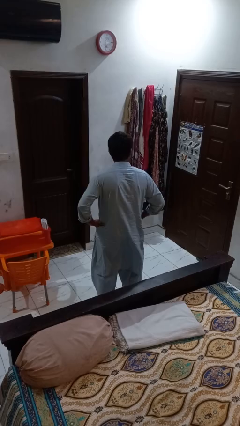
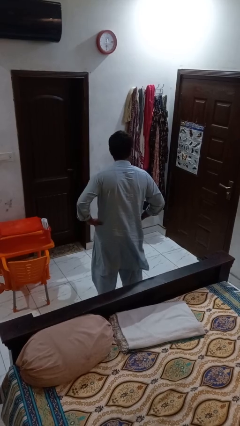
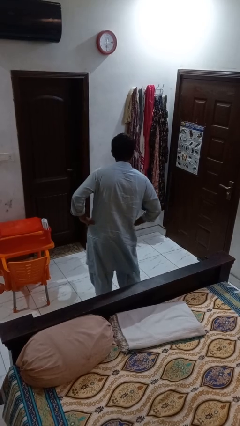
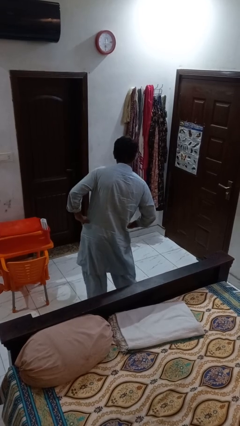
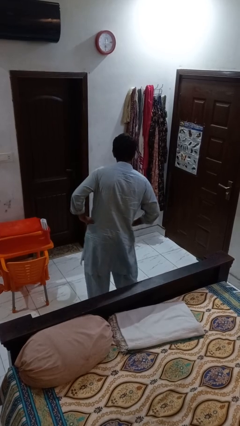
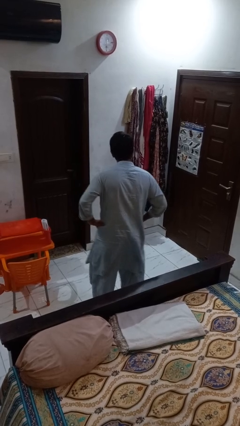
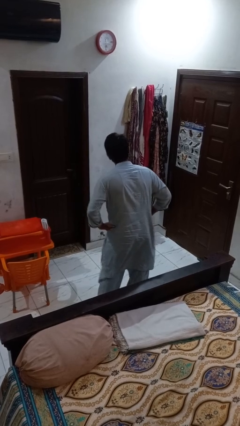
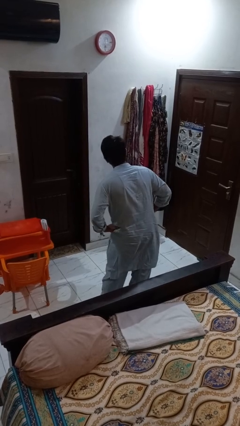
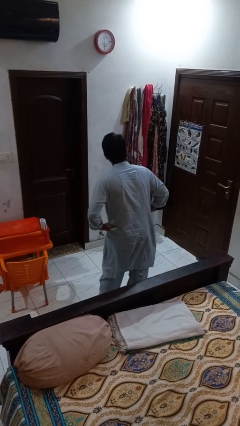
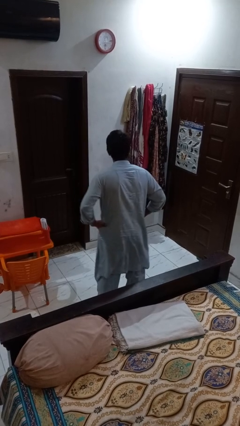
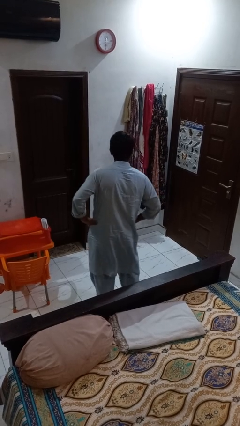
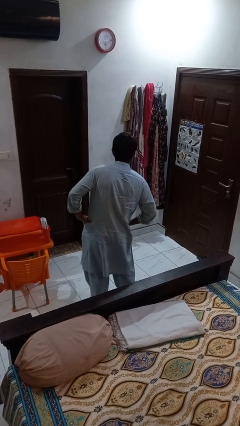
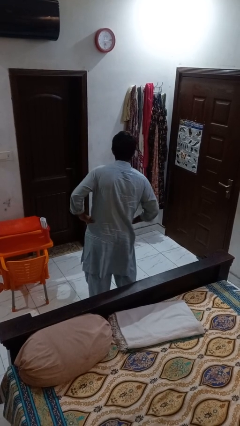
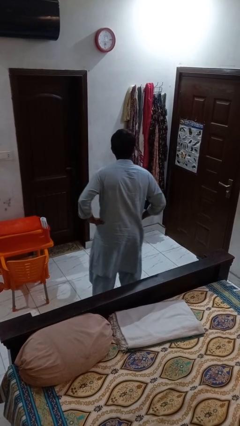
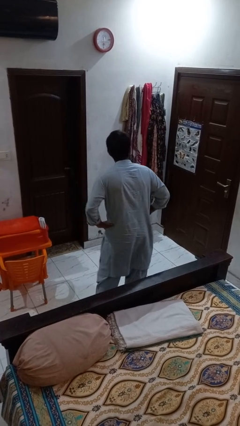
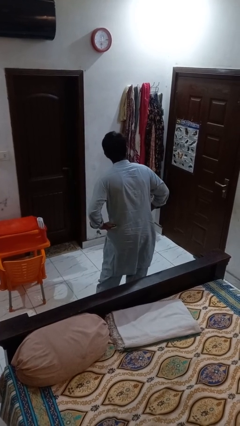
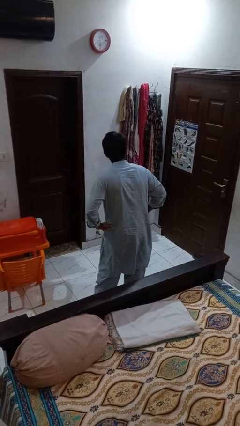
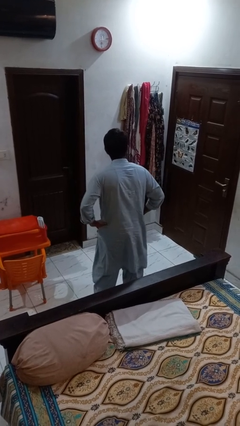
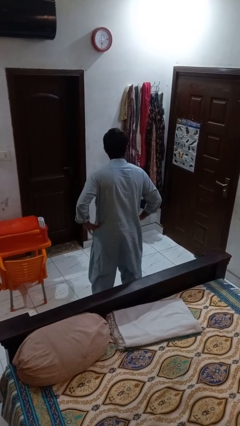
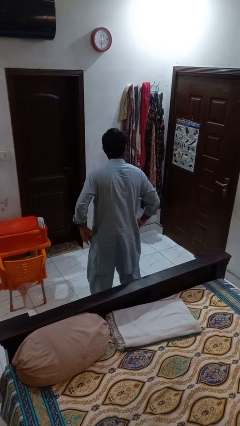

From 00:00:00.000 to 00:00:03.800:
person wiggles hips

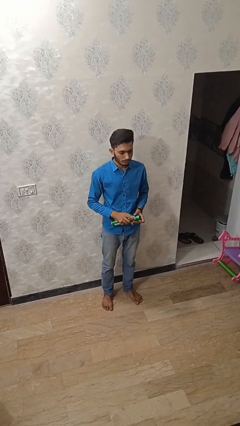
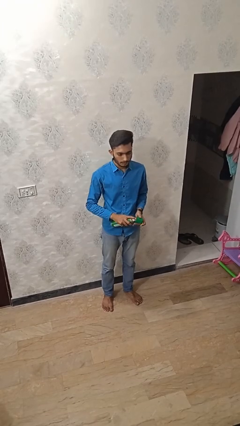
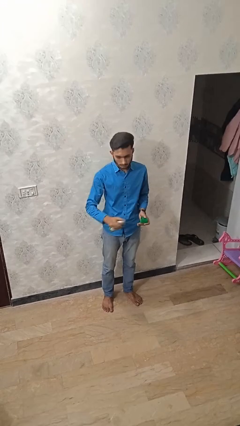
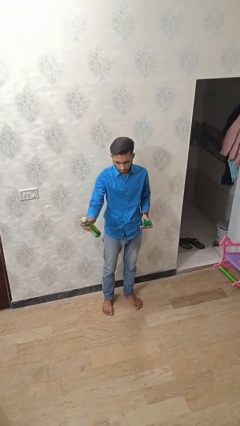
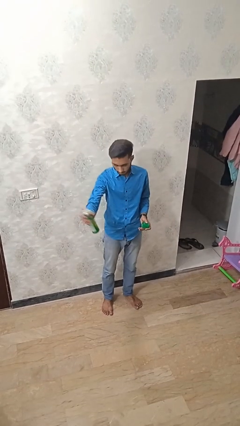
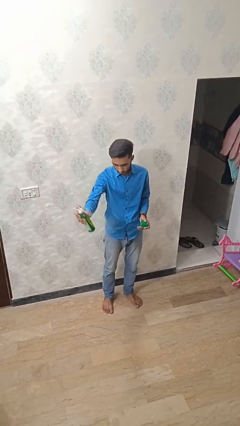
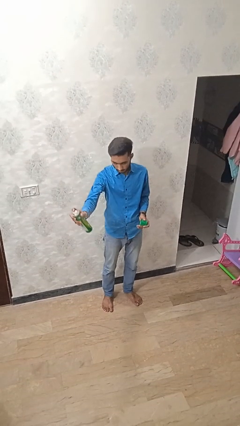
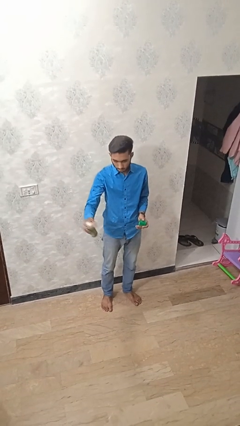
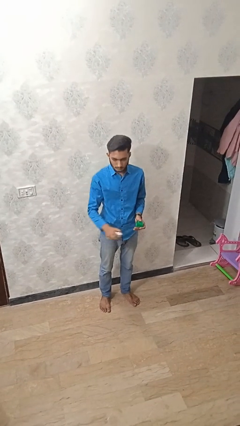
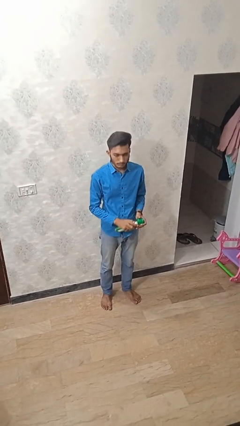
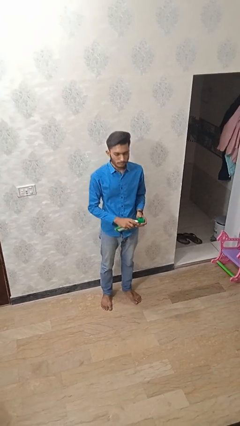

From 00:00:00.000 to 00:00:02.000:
person sprays from bottle

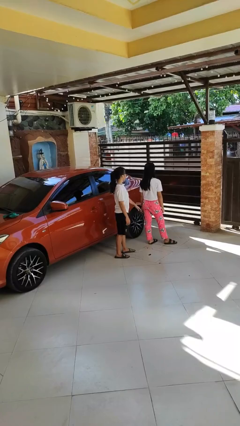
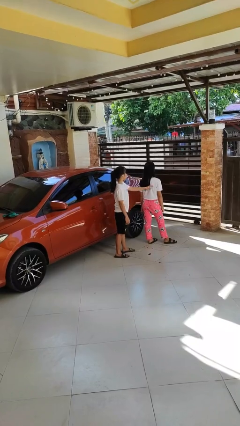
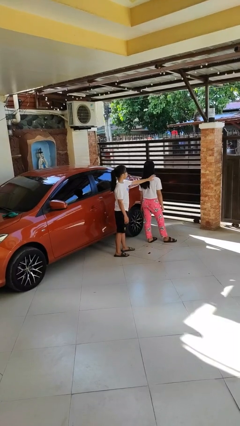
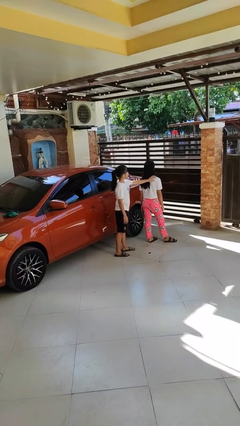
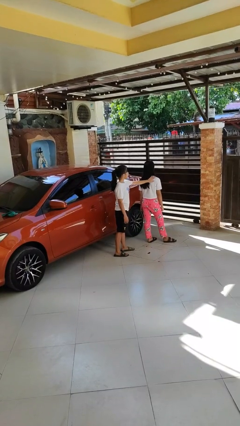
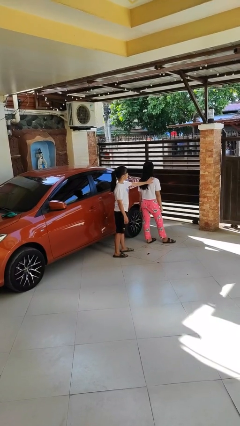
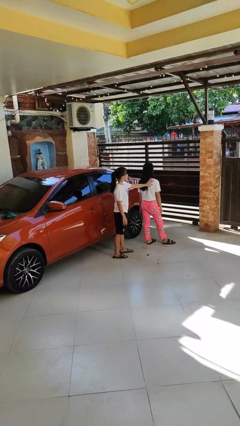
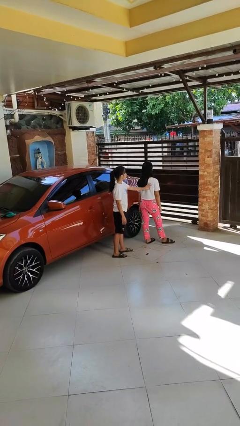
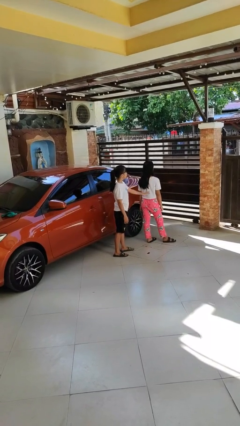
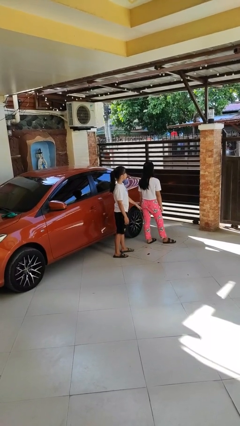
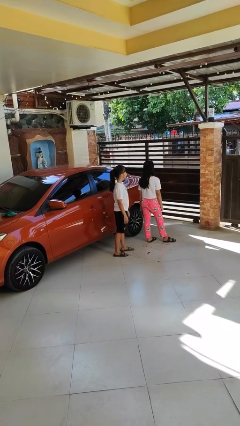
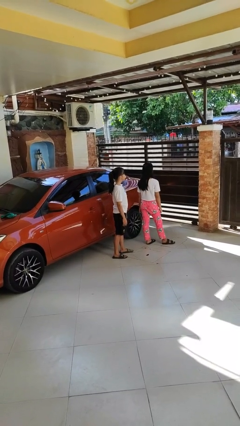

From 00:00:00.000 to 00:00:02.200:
person touches back of person

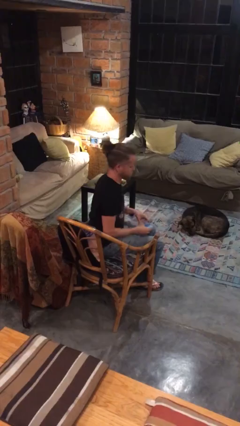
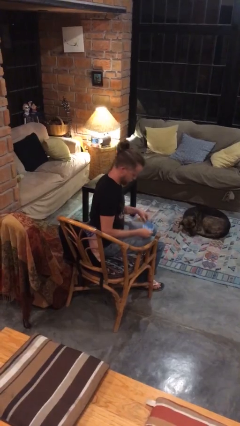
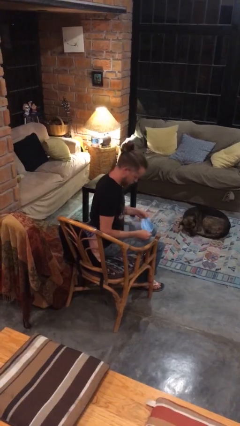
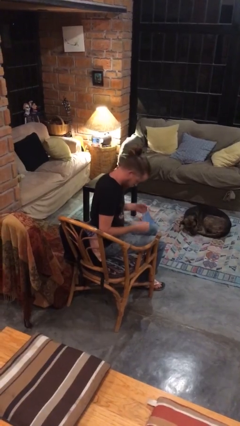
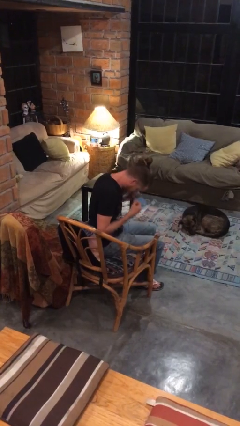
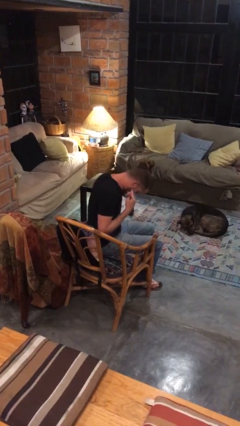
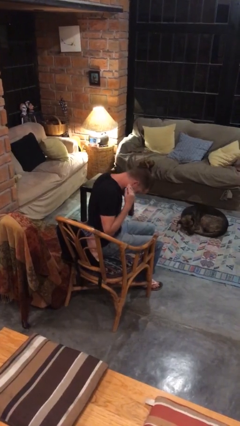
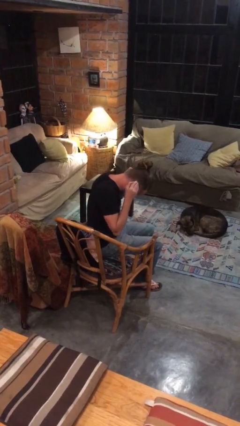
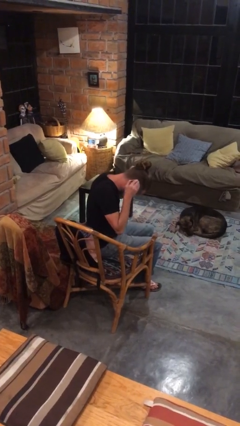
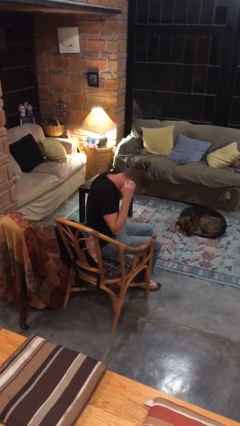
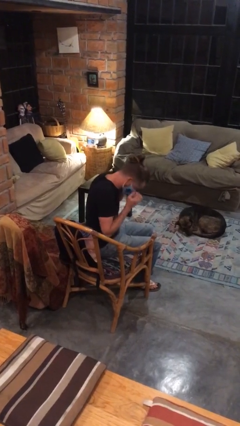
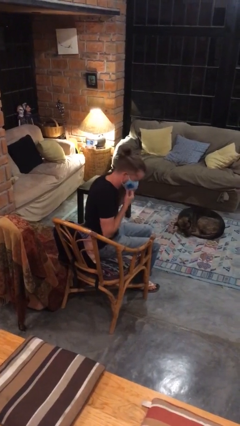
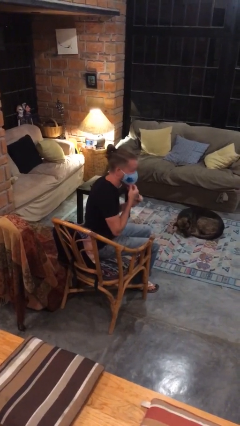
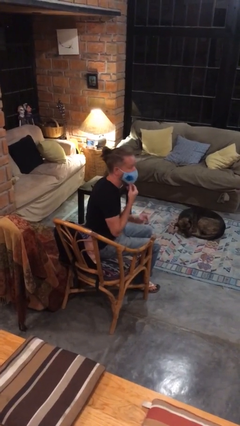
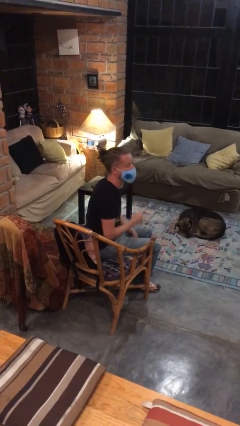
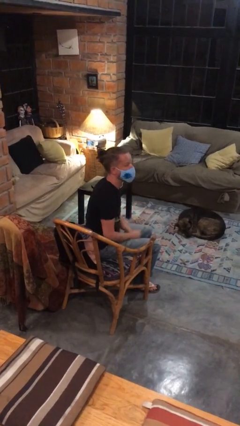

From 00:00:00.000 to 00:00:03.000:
person puts on facemask

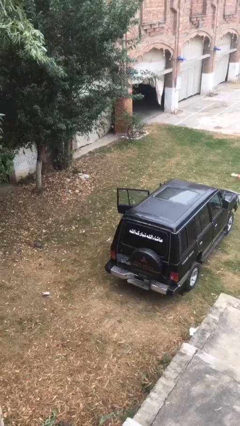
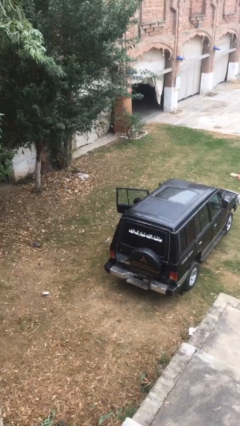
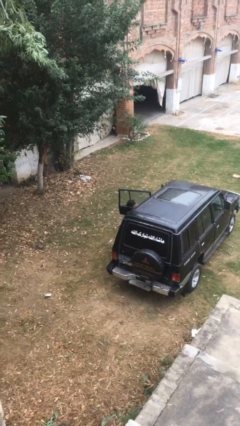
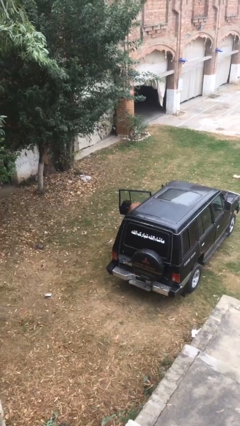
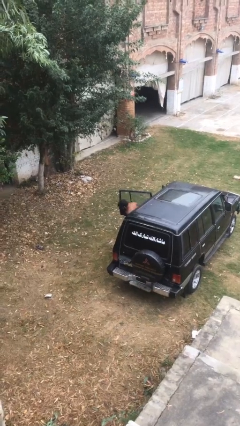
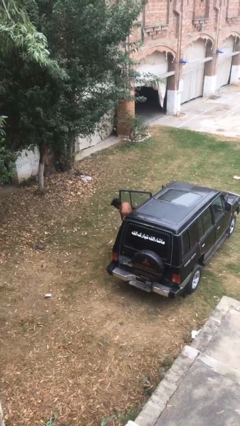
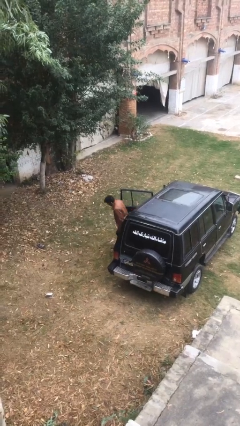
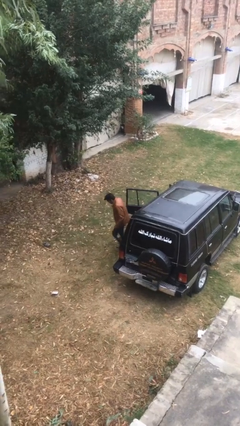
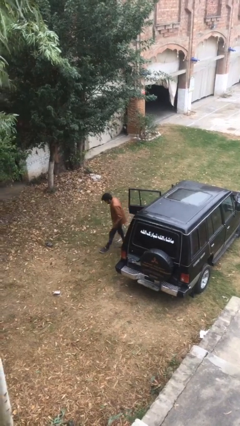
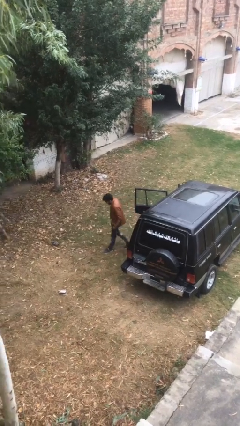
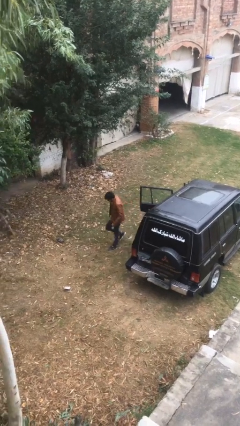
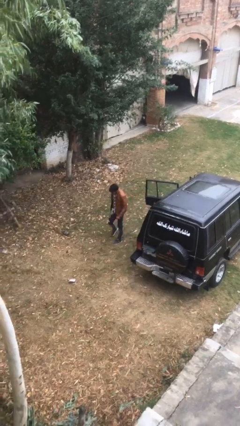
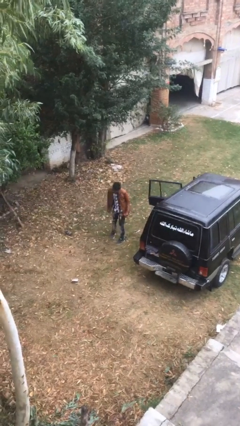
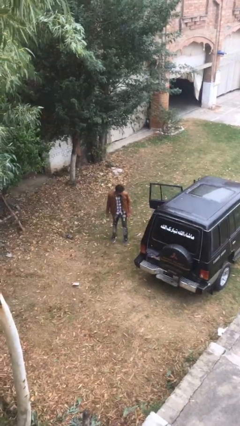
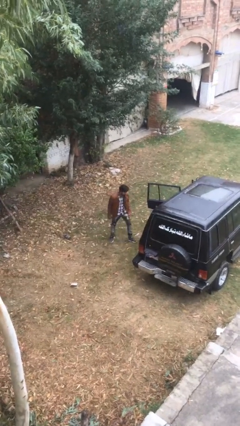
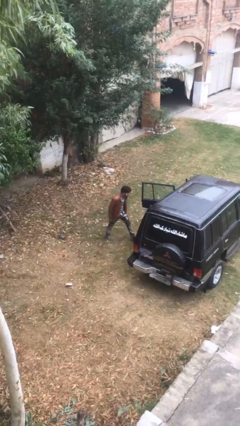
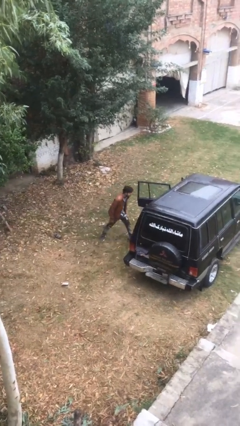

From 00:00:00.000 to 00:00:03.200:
person exits car

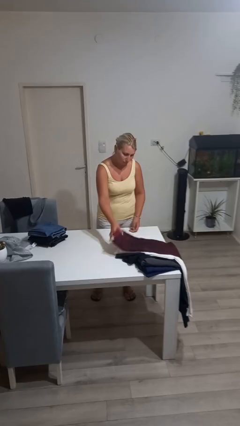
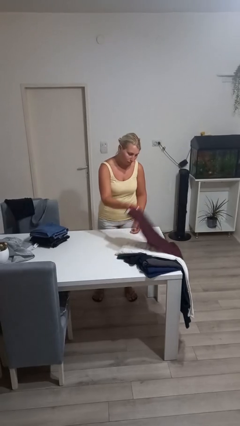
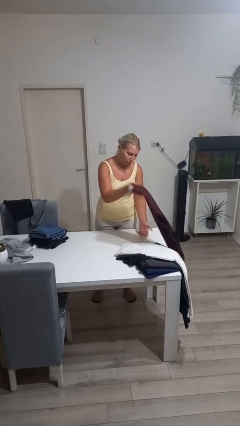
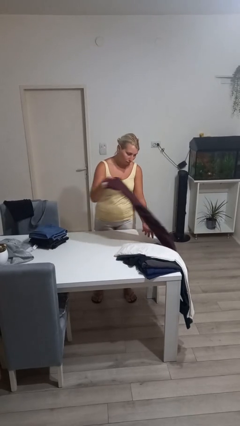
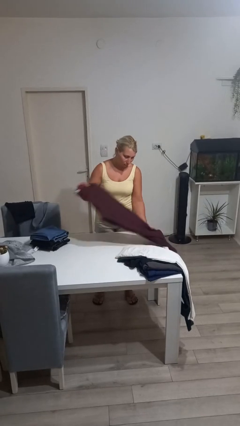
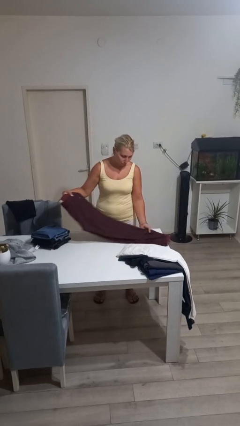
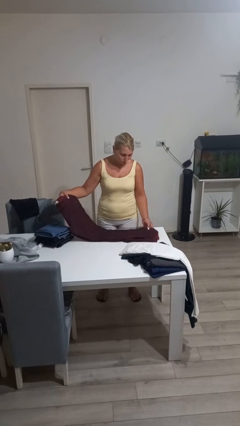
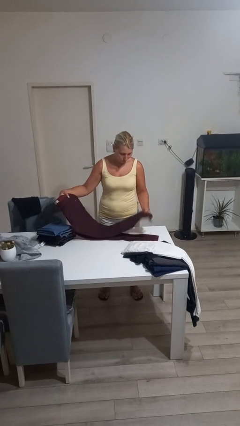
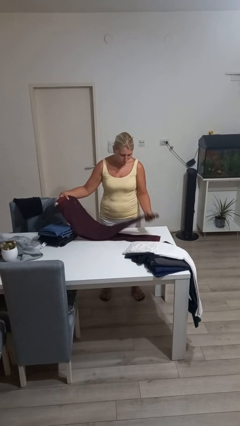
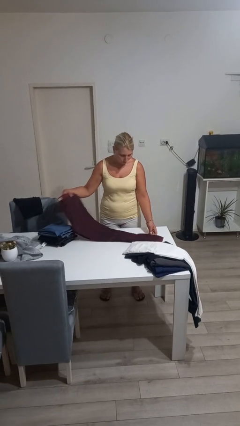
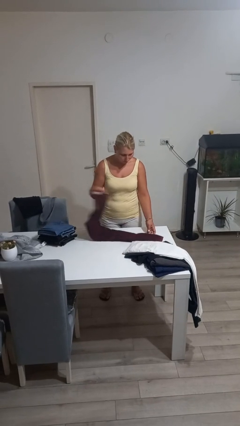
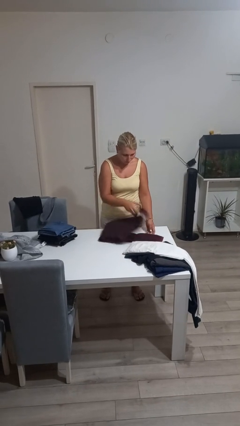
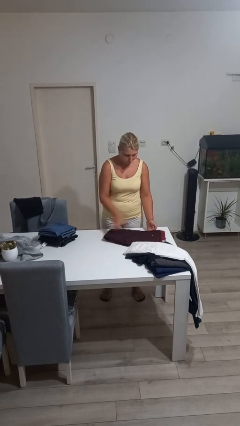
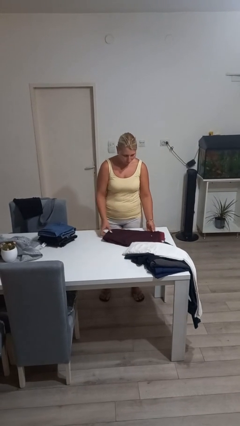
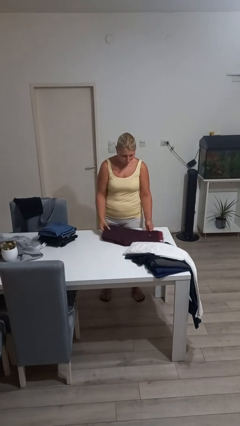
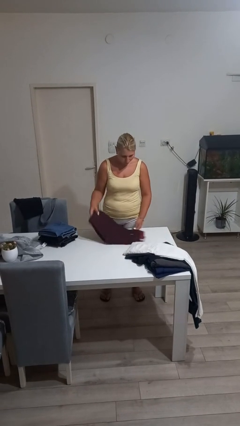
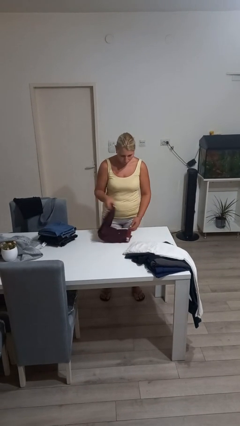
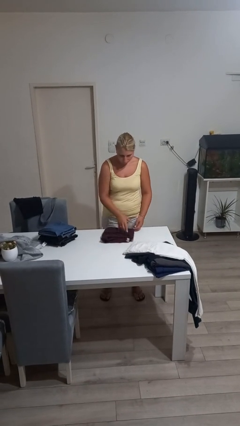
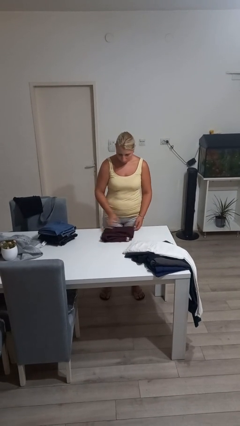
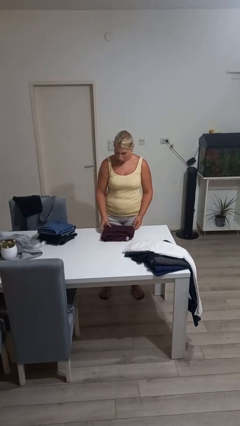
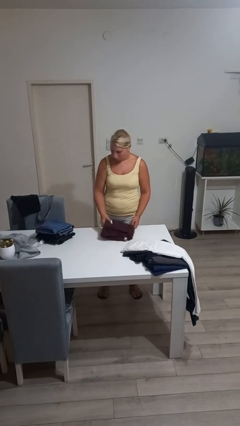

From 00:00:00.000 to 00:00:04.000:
person folds pants
